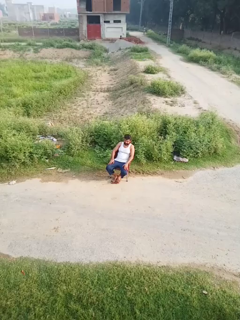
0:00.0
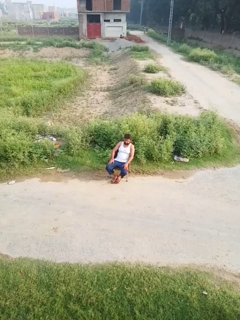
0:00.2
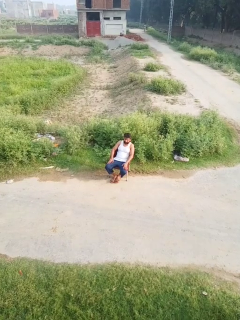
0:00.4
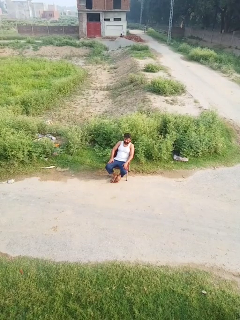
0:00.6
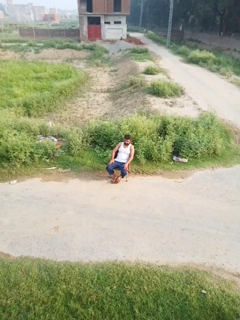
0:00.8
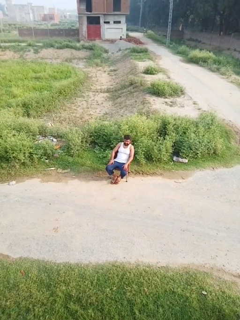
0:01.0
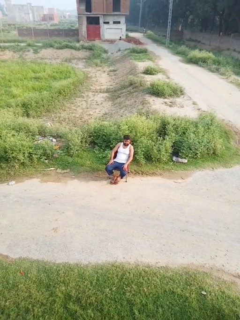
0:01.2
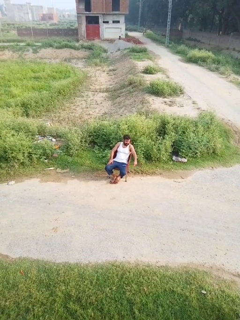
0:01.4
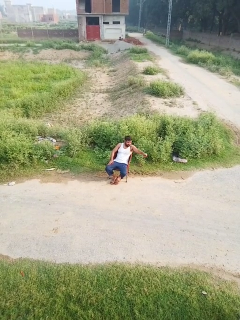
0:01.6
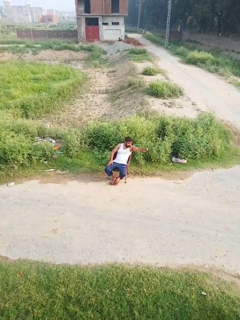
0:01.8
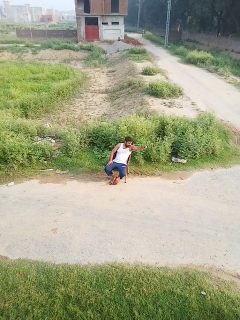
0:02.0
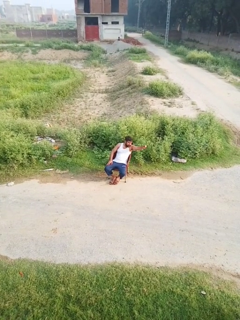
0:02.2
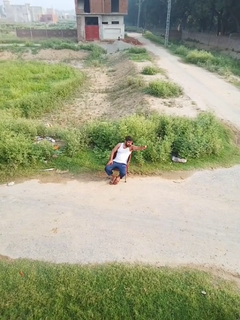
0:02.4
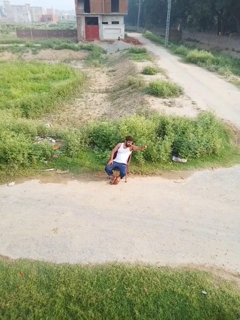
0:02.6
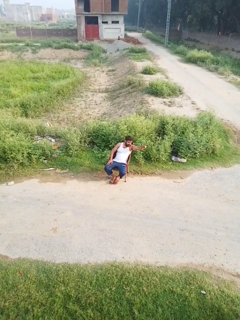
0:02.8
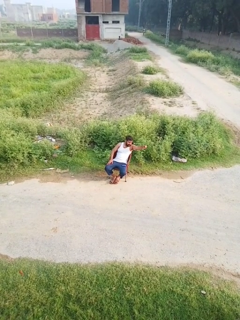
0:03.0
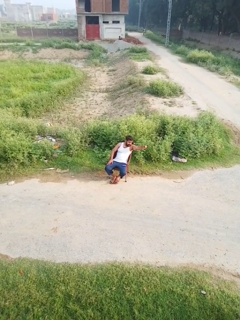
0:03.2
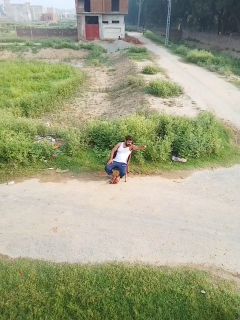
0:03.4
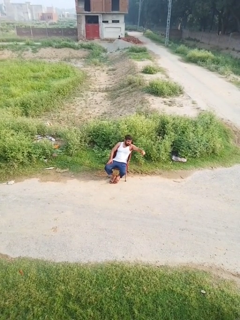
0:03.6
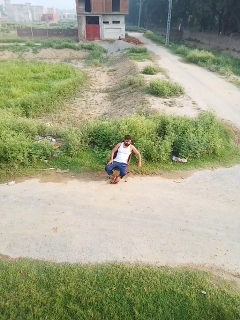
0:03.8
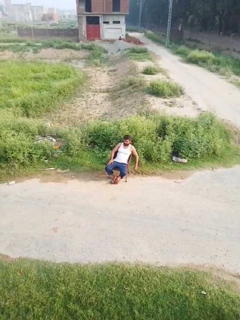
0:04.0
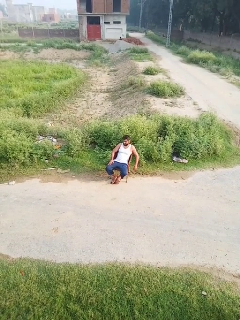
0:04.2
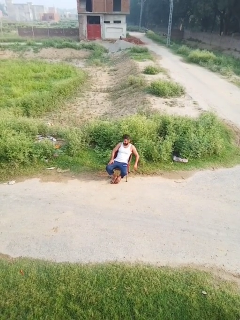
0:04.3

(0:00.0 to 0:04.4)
person points at person

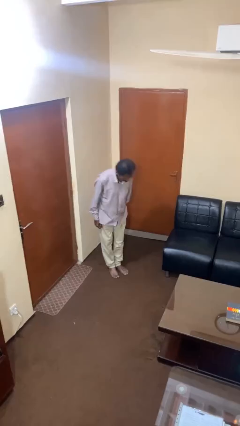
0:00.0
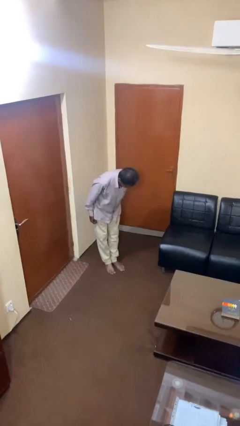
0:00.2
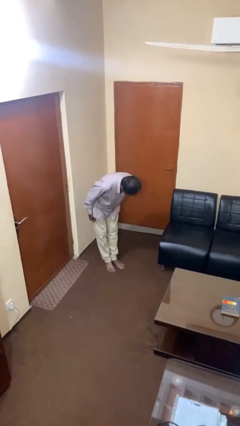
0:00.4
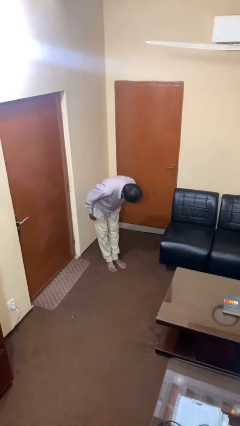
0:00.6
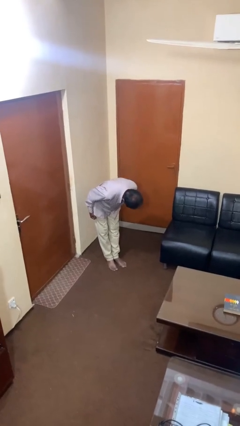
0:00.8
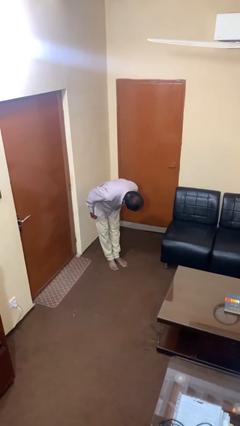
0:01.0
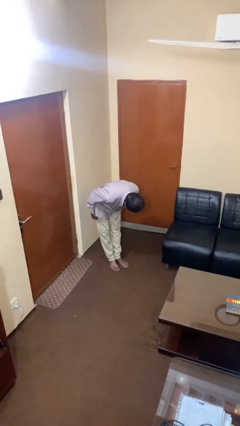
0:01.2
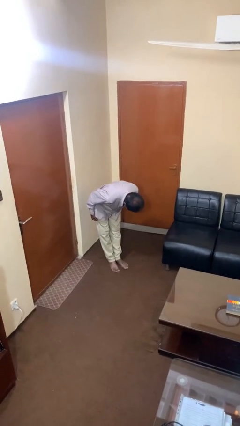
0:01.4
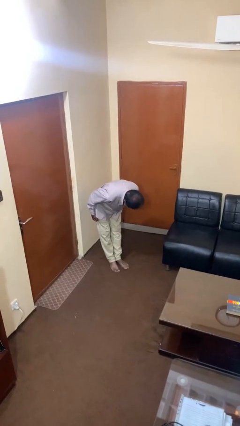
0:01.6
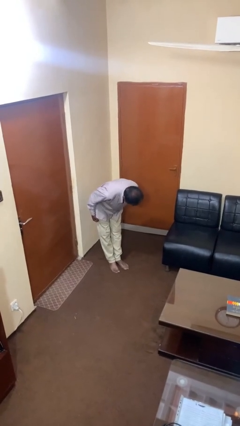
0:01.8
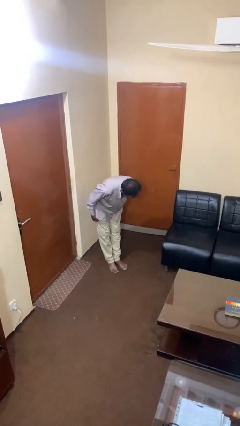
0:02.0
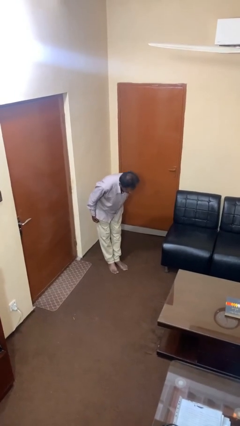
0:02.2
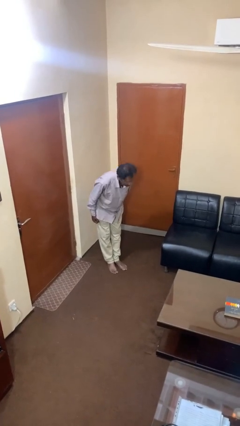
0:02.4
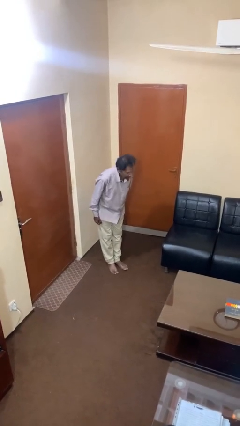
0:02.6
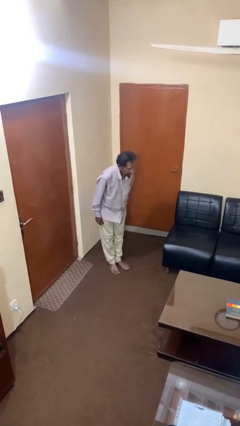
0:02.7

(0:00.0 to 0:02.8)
person bows

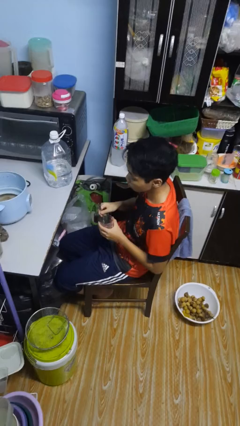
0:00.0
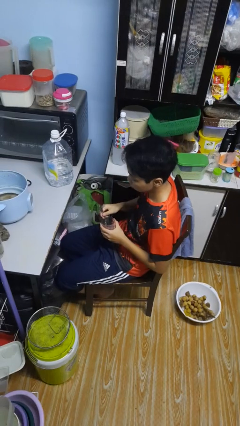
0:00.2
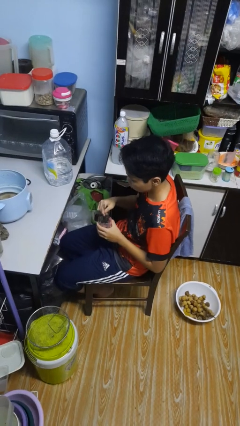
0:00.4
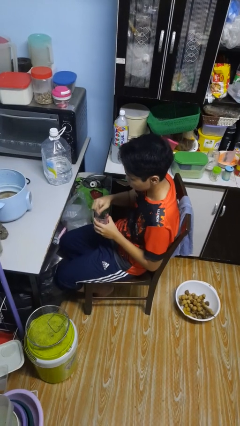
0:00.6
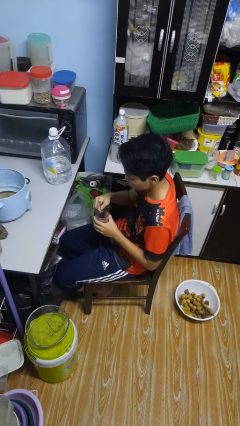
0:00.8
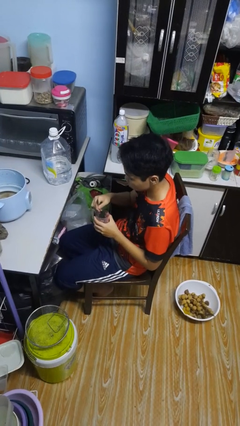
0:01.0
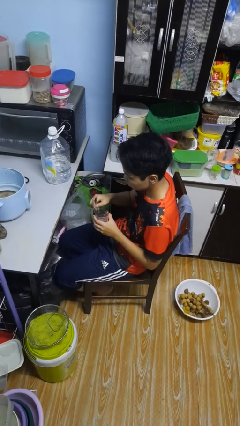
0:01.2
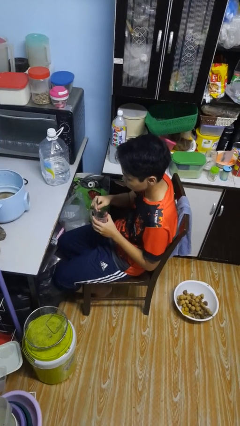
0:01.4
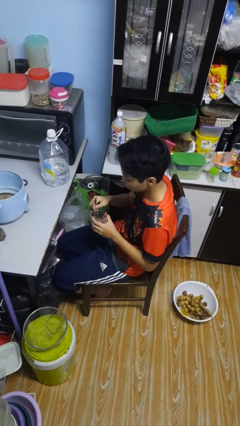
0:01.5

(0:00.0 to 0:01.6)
person stirs mug

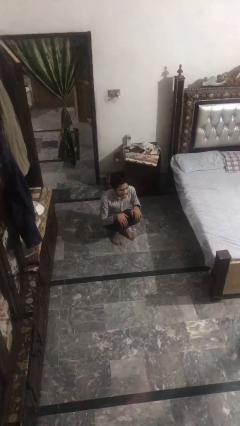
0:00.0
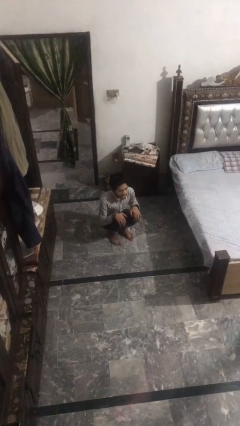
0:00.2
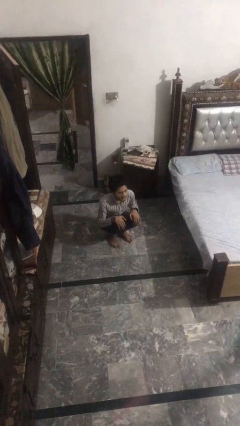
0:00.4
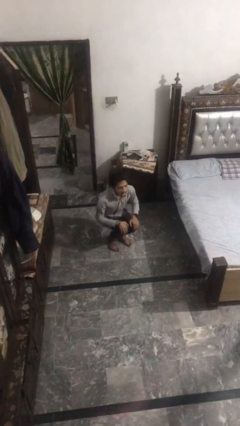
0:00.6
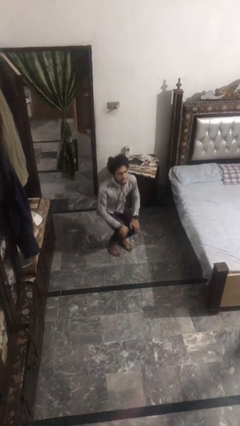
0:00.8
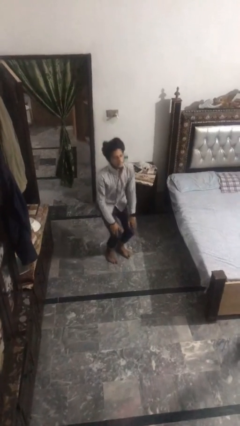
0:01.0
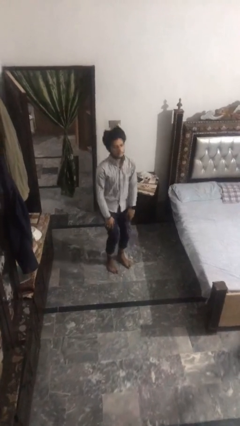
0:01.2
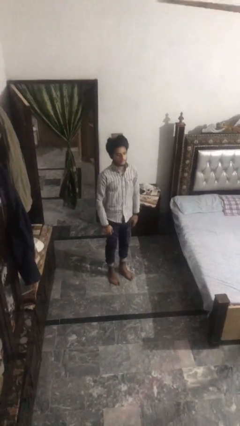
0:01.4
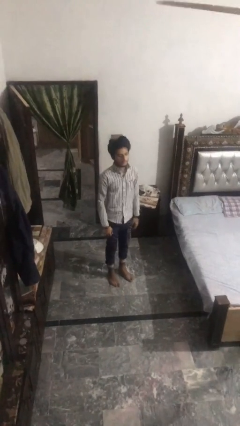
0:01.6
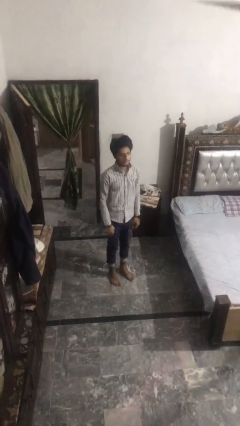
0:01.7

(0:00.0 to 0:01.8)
person stands up

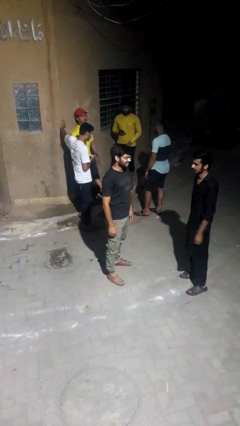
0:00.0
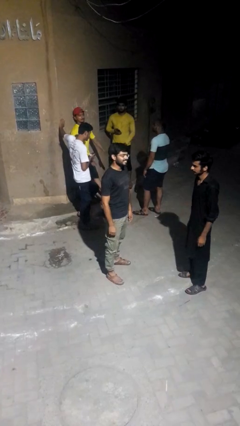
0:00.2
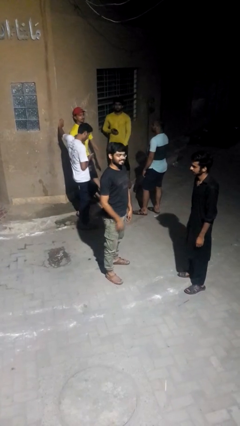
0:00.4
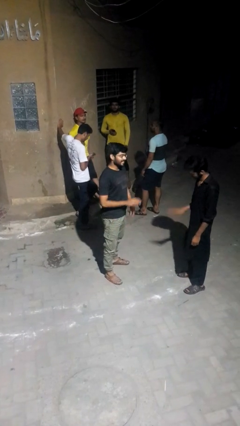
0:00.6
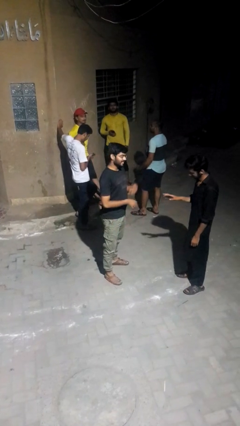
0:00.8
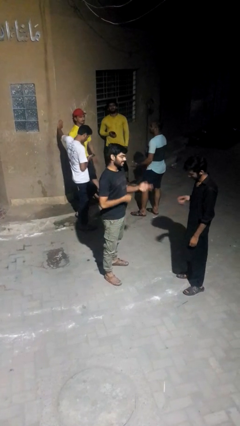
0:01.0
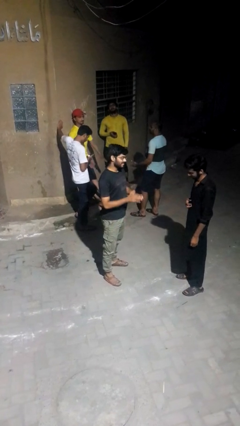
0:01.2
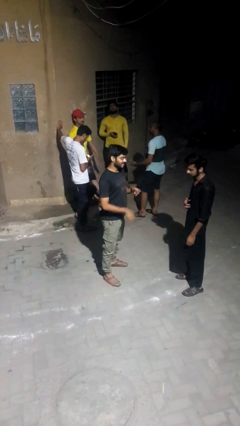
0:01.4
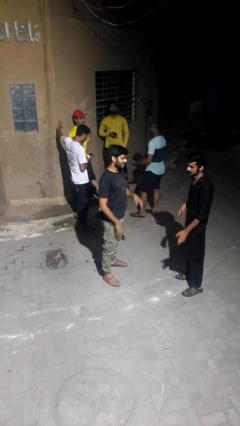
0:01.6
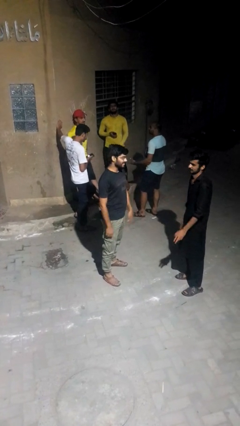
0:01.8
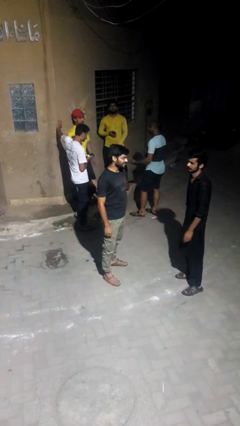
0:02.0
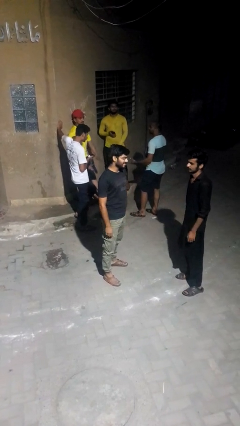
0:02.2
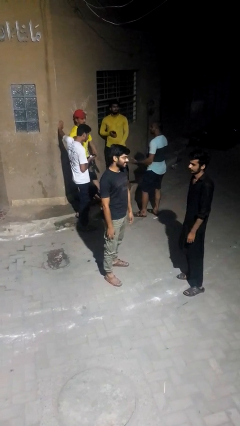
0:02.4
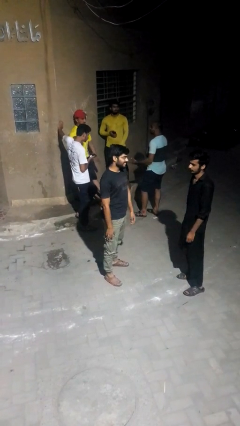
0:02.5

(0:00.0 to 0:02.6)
person talks to person

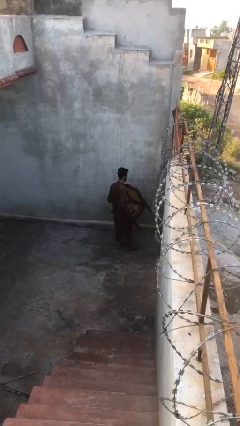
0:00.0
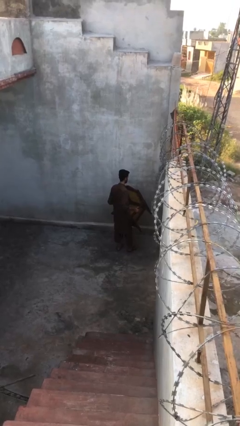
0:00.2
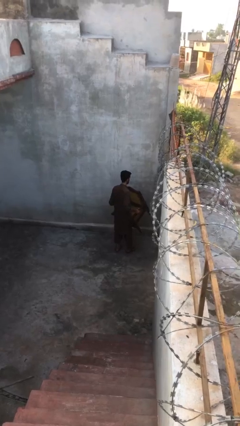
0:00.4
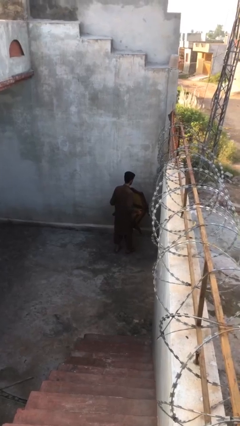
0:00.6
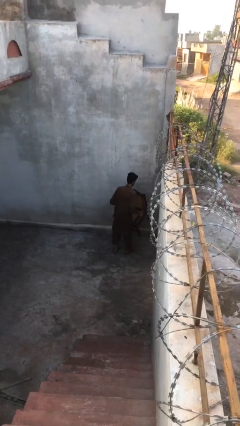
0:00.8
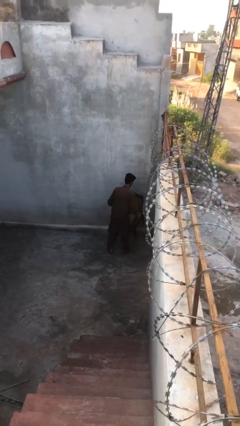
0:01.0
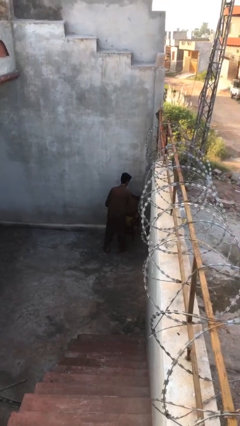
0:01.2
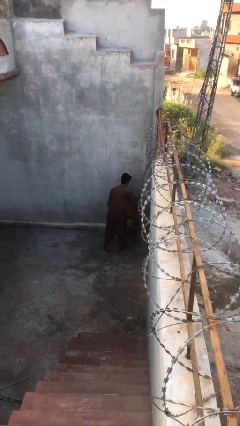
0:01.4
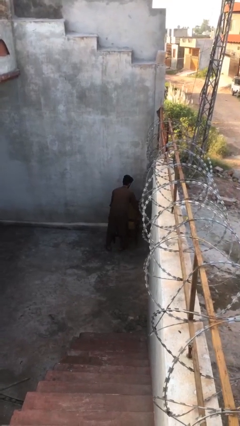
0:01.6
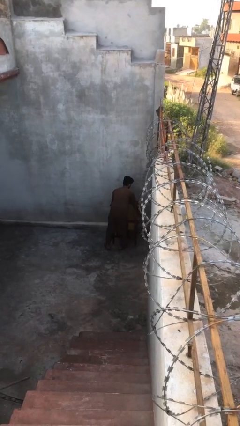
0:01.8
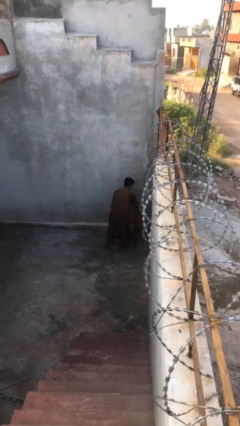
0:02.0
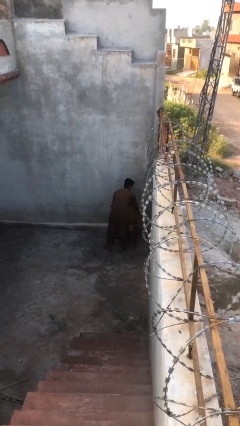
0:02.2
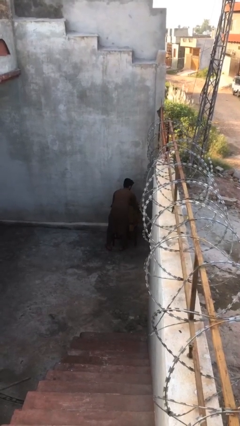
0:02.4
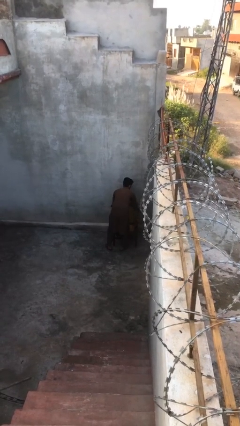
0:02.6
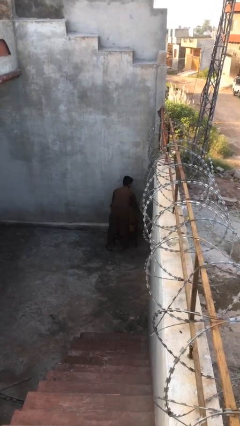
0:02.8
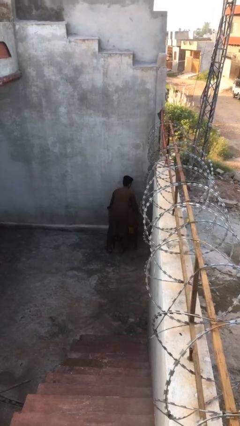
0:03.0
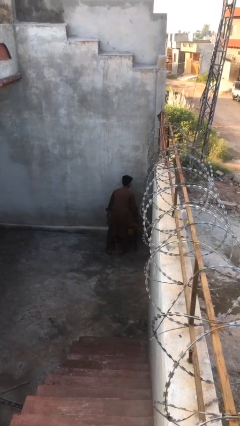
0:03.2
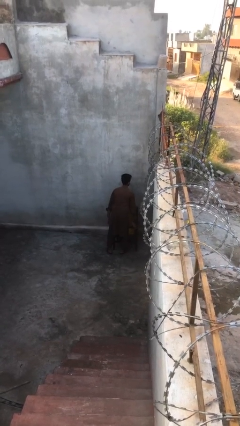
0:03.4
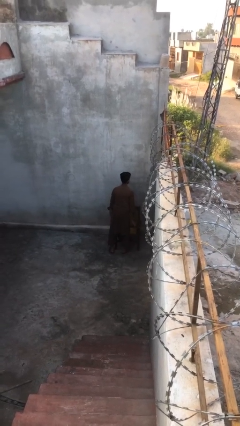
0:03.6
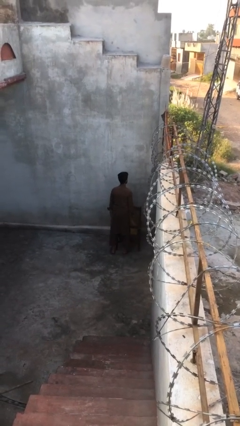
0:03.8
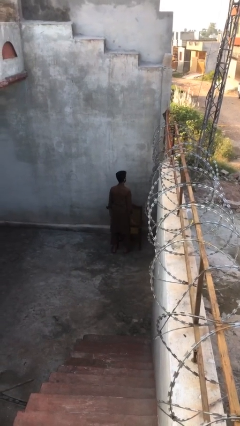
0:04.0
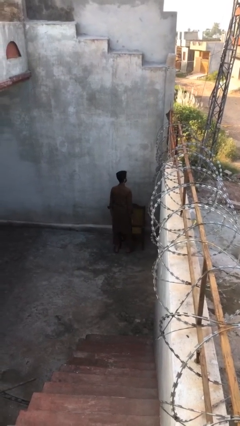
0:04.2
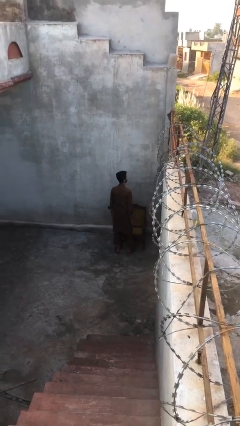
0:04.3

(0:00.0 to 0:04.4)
person puts down object on floor

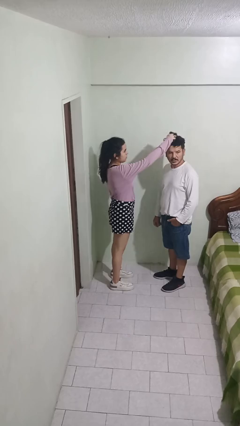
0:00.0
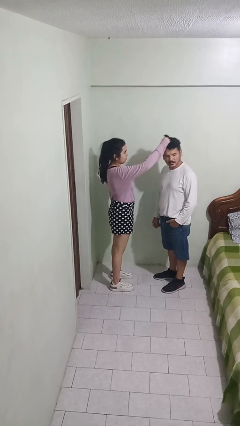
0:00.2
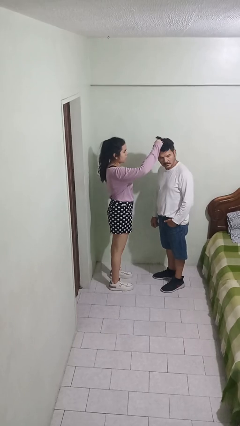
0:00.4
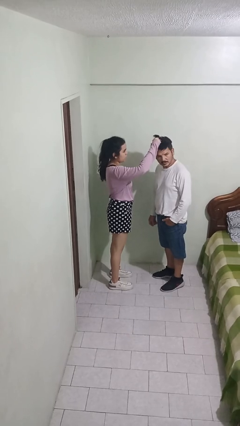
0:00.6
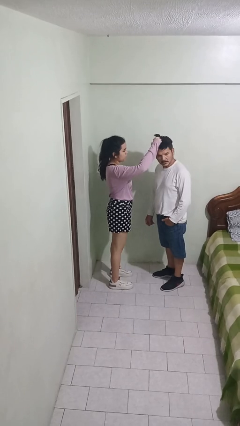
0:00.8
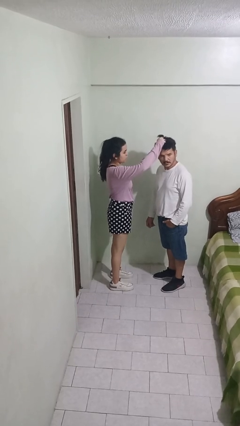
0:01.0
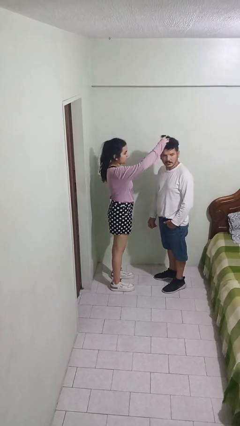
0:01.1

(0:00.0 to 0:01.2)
person grabs person by hair
